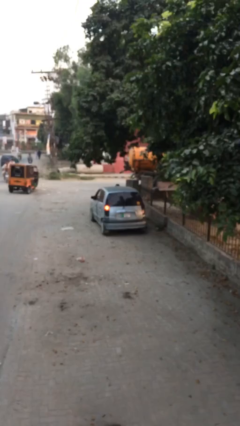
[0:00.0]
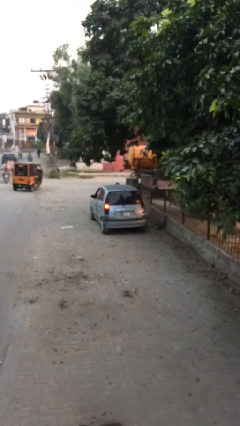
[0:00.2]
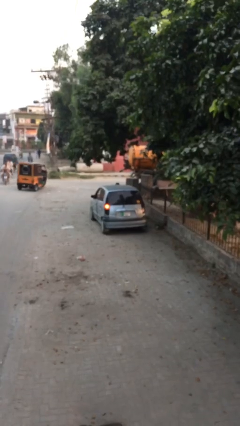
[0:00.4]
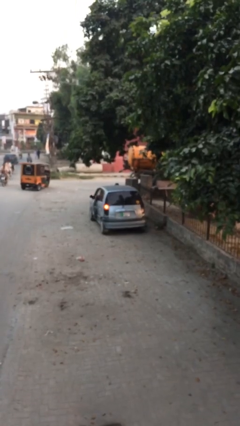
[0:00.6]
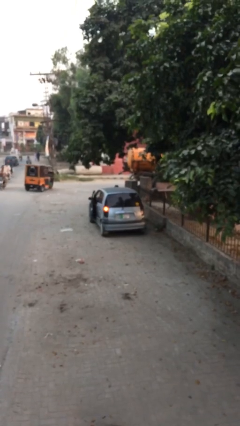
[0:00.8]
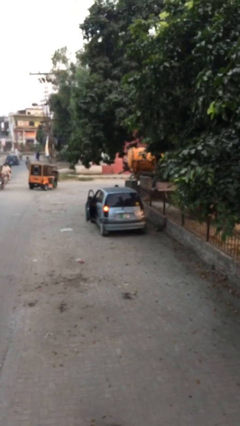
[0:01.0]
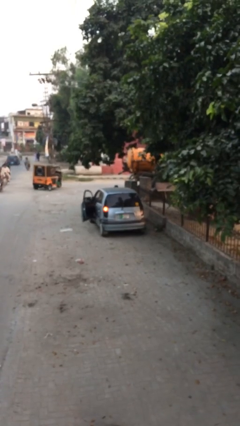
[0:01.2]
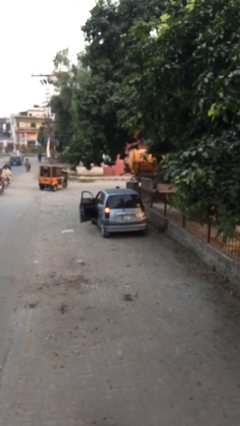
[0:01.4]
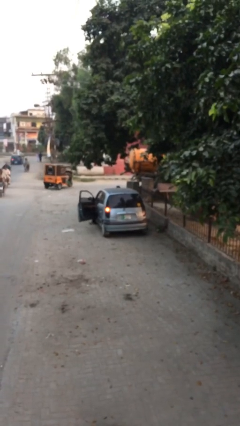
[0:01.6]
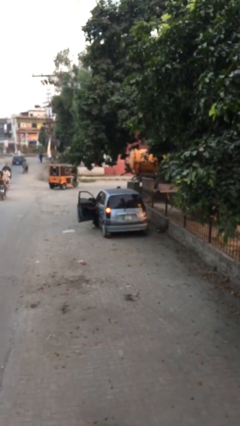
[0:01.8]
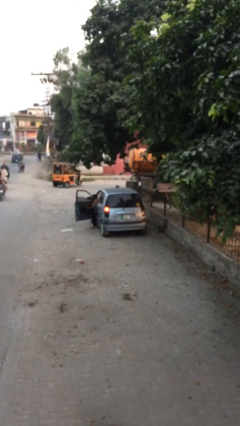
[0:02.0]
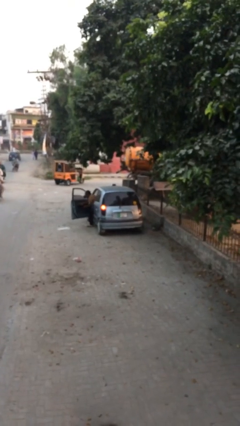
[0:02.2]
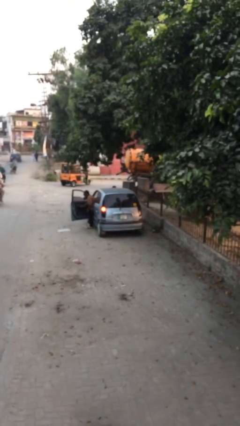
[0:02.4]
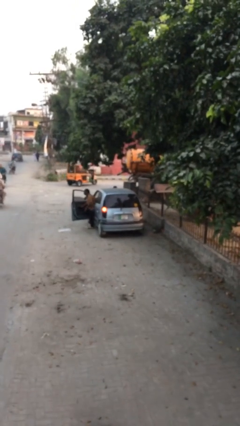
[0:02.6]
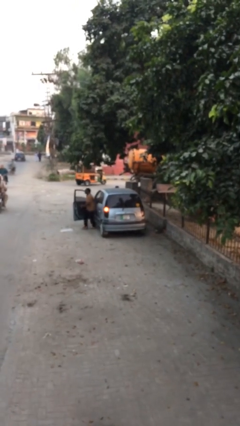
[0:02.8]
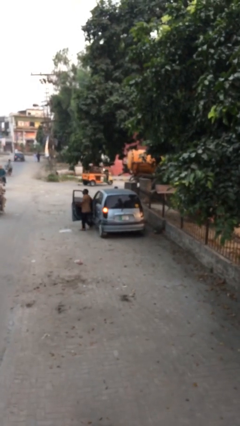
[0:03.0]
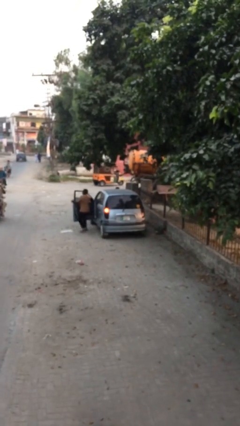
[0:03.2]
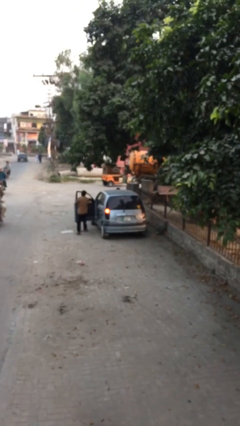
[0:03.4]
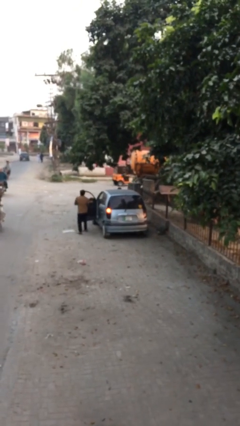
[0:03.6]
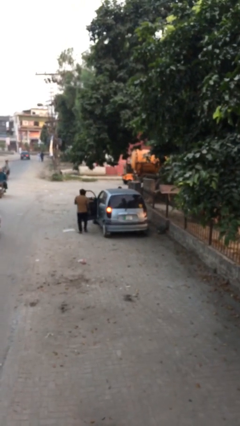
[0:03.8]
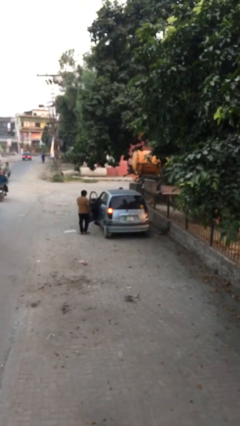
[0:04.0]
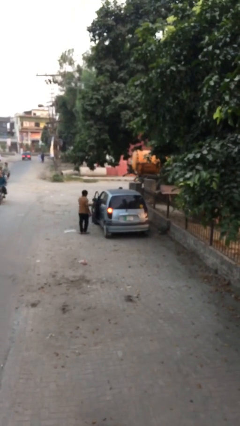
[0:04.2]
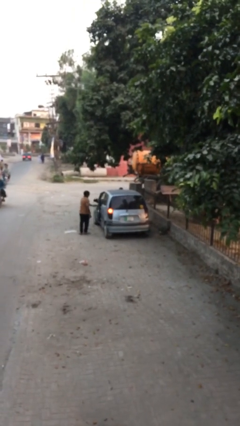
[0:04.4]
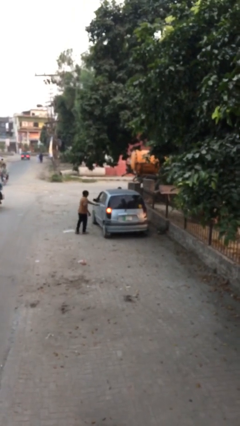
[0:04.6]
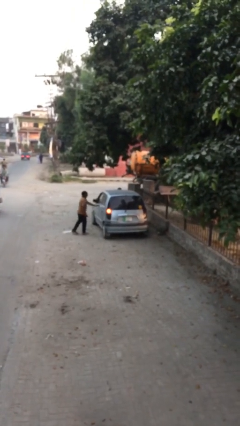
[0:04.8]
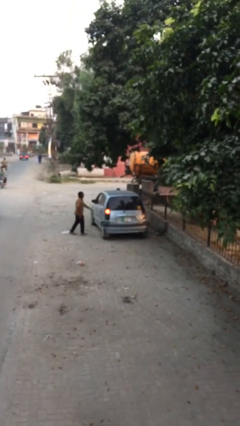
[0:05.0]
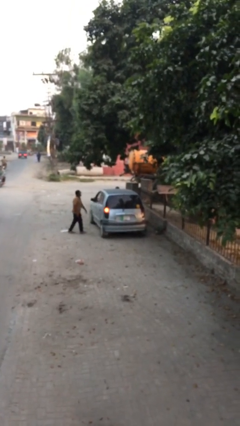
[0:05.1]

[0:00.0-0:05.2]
car drops off person

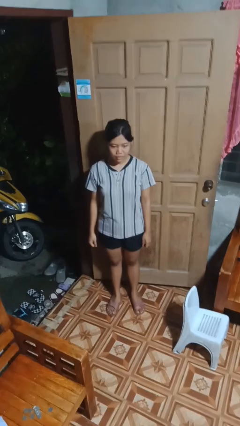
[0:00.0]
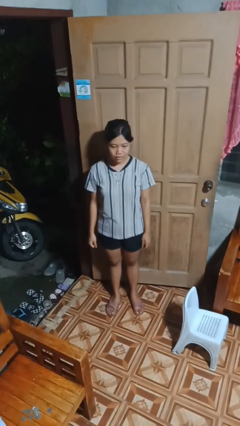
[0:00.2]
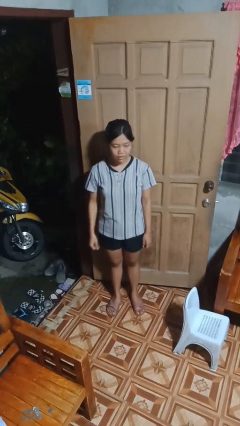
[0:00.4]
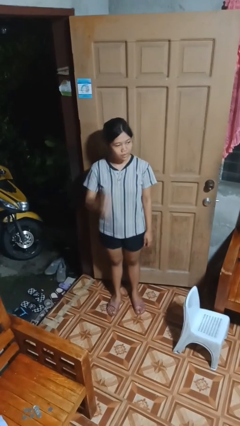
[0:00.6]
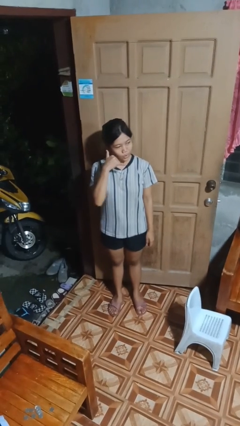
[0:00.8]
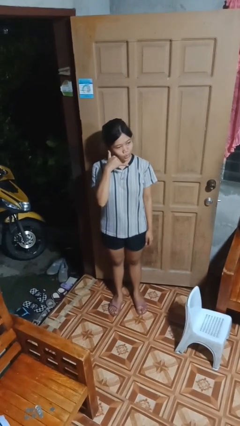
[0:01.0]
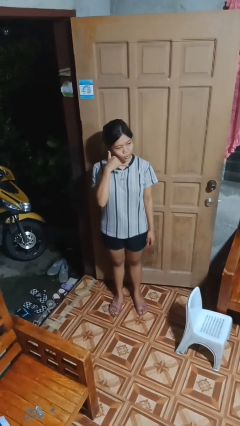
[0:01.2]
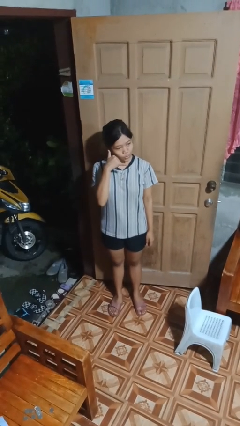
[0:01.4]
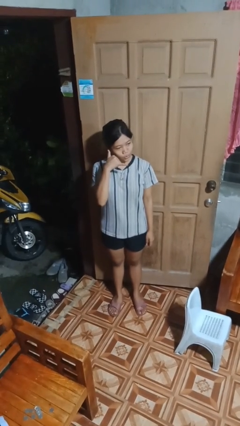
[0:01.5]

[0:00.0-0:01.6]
person gestures call me

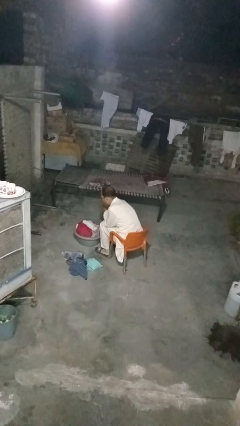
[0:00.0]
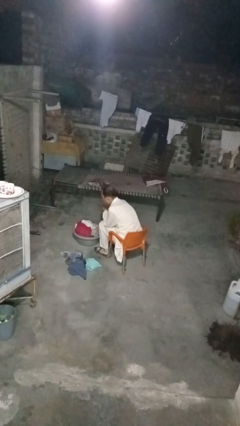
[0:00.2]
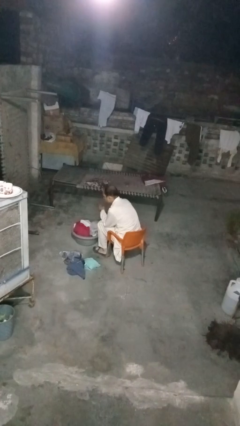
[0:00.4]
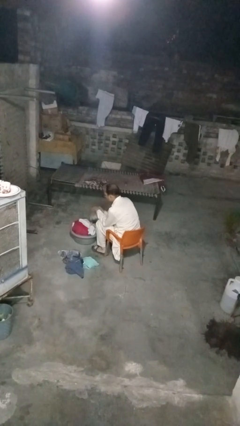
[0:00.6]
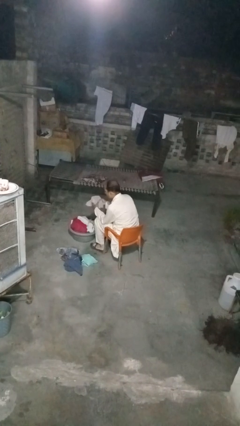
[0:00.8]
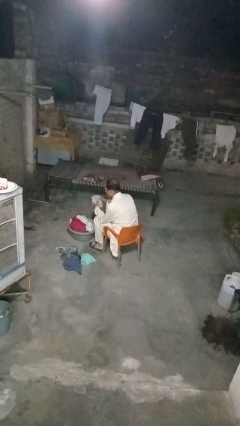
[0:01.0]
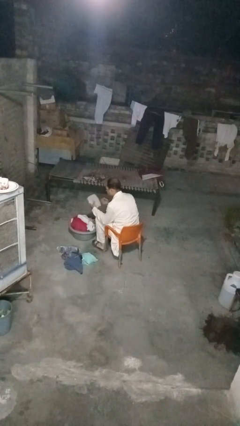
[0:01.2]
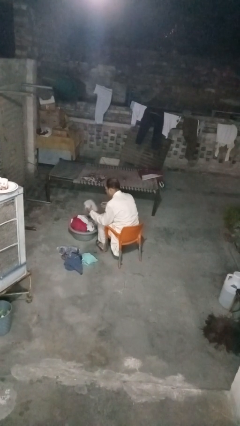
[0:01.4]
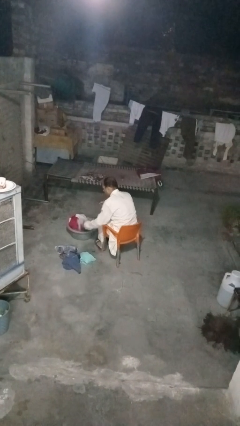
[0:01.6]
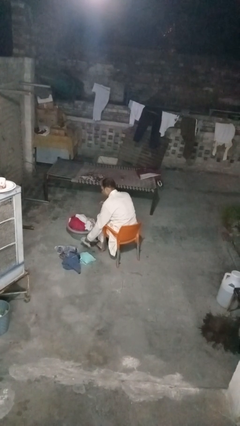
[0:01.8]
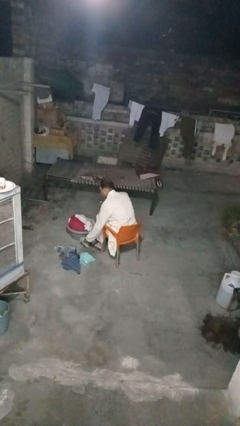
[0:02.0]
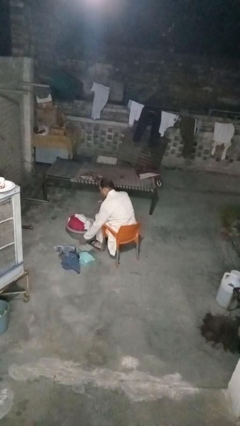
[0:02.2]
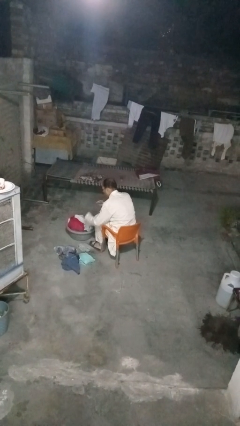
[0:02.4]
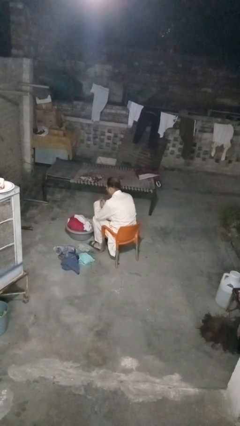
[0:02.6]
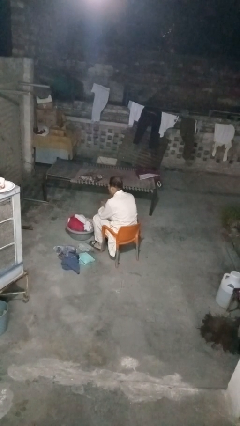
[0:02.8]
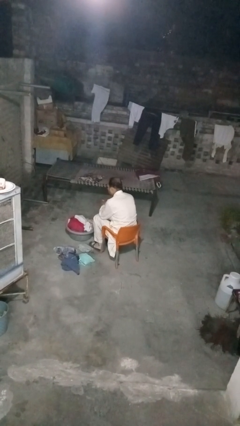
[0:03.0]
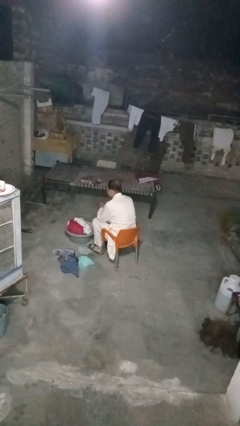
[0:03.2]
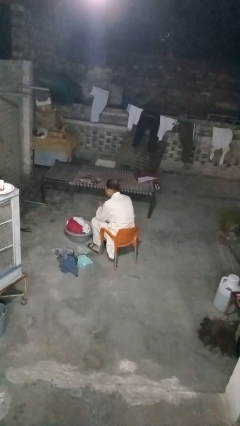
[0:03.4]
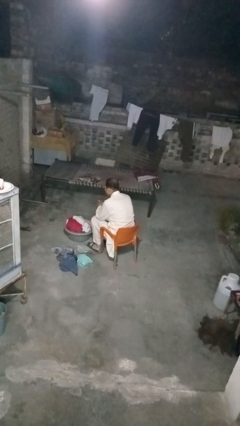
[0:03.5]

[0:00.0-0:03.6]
person takes object from basket

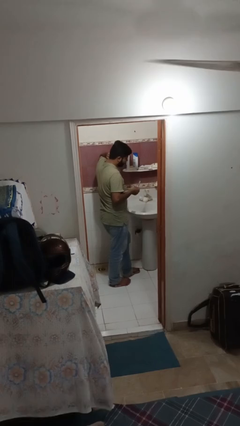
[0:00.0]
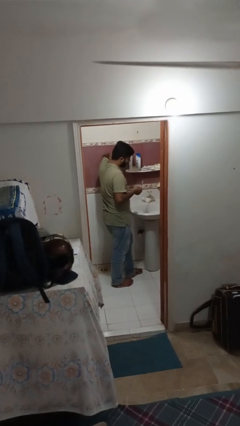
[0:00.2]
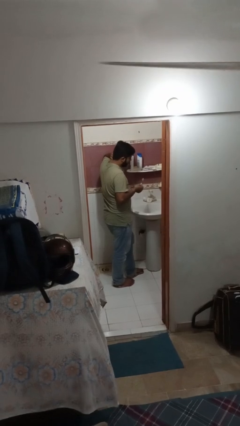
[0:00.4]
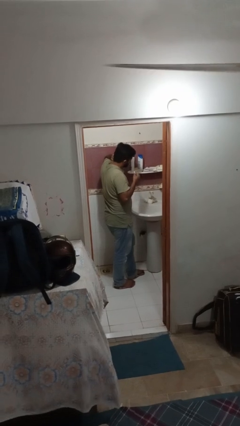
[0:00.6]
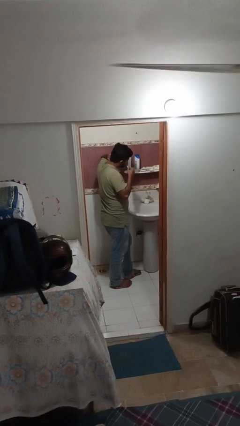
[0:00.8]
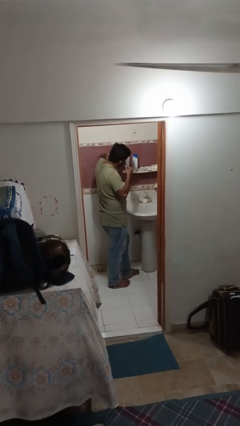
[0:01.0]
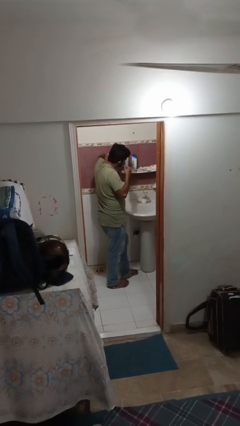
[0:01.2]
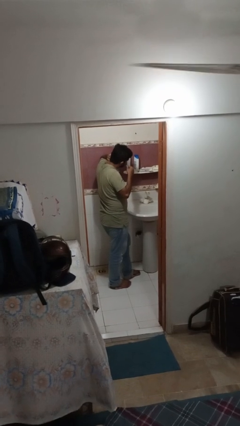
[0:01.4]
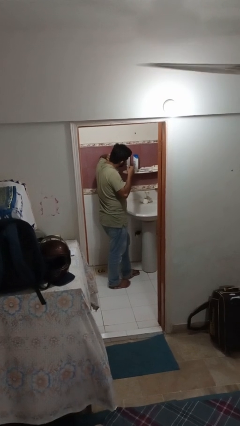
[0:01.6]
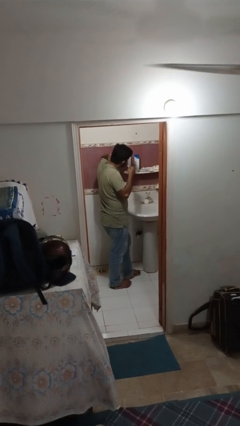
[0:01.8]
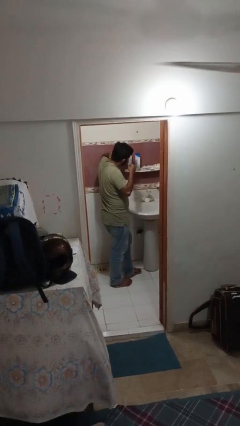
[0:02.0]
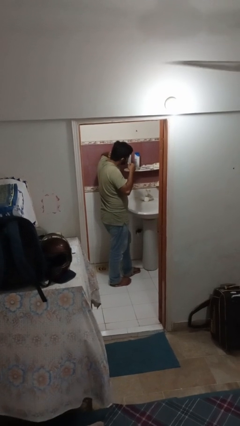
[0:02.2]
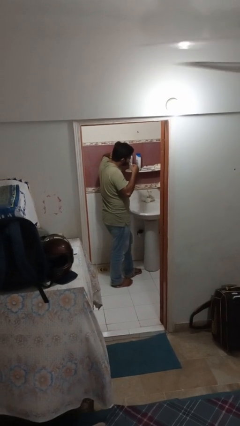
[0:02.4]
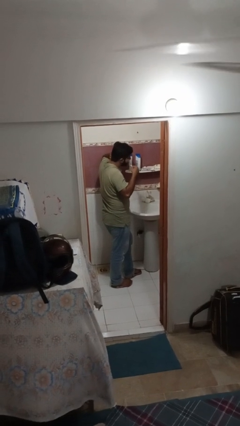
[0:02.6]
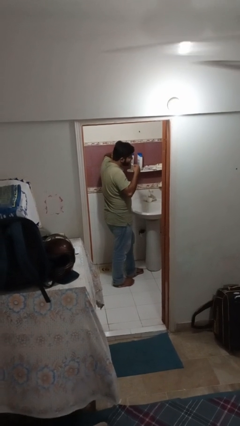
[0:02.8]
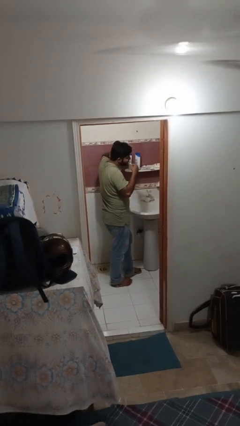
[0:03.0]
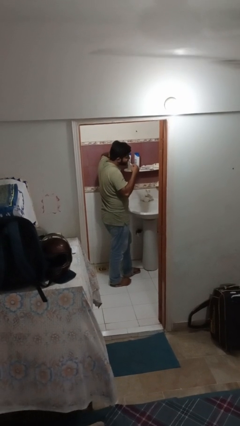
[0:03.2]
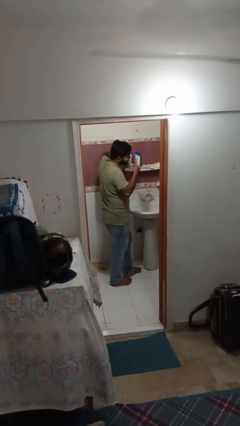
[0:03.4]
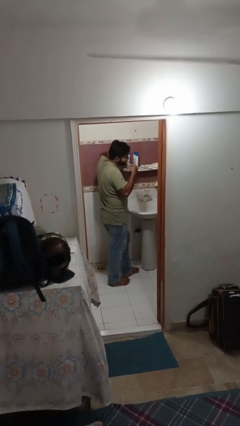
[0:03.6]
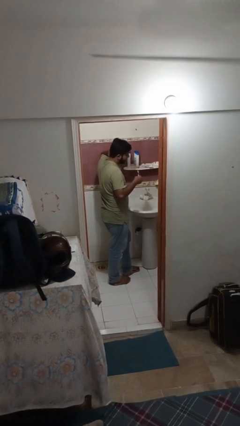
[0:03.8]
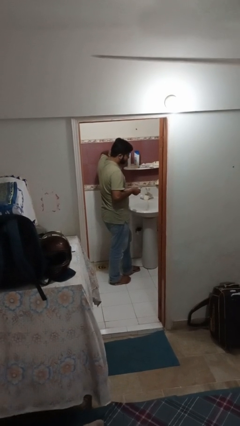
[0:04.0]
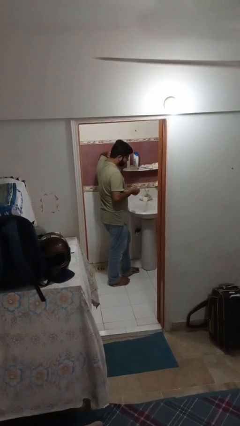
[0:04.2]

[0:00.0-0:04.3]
person brushes teeth

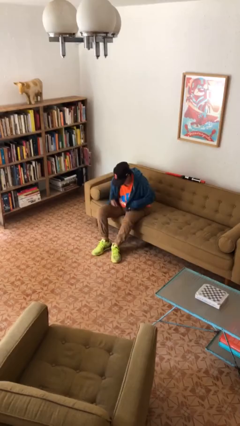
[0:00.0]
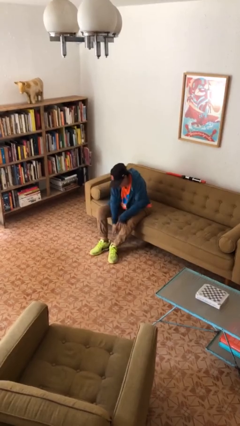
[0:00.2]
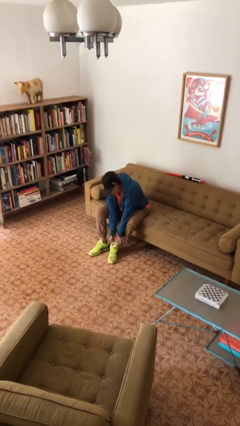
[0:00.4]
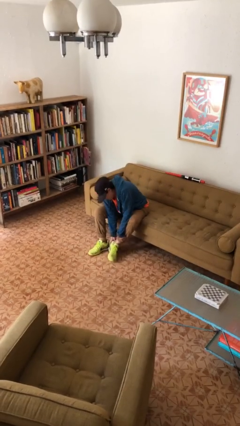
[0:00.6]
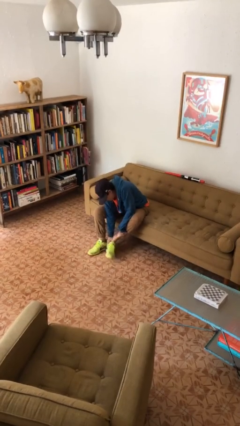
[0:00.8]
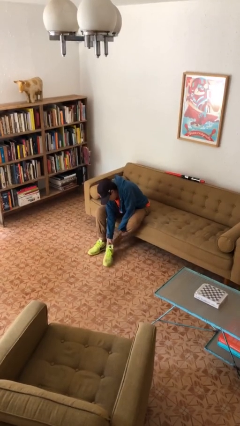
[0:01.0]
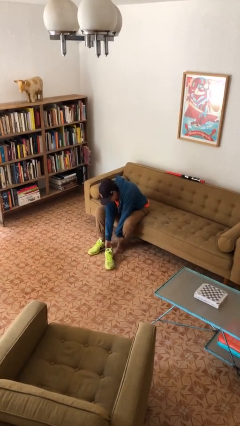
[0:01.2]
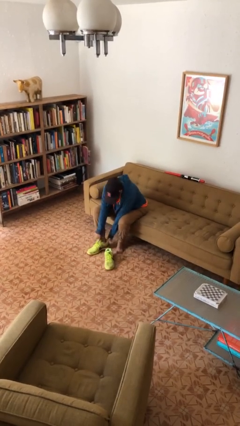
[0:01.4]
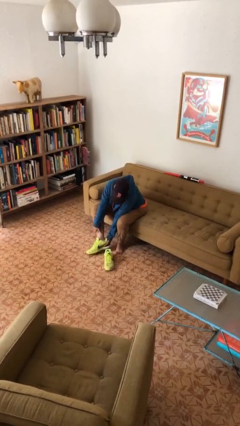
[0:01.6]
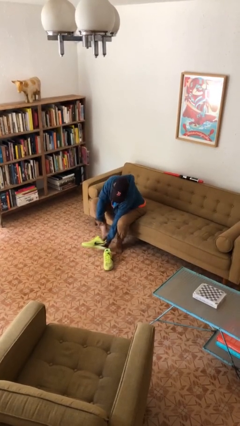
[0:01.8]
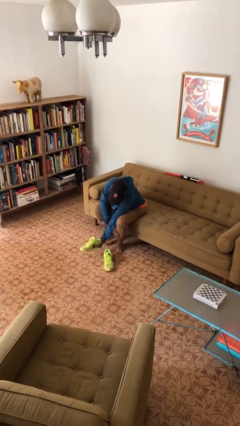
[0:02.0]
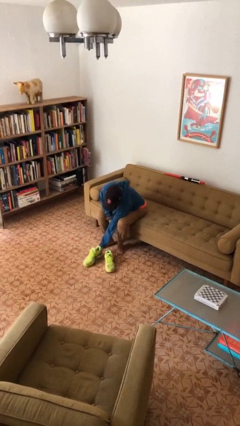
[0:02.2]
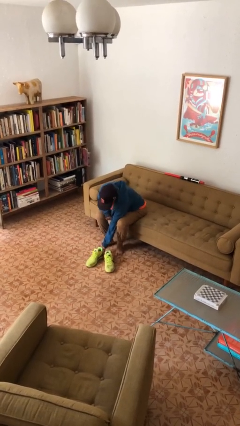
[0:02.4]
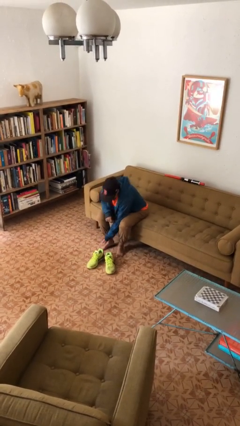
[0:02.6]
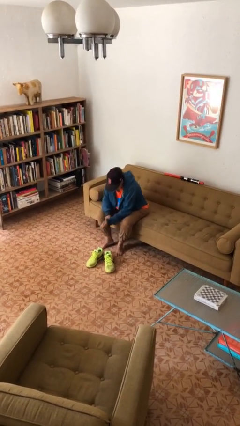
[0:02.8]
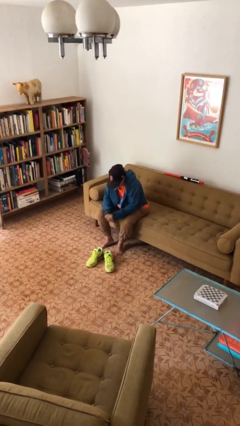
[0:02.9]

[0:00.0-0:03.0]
person takes off shoes

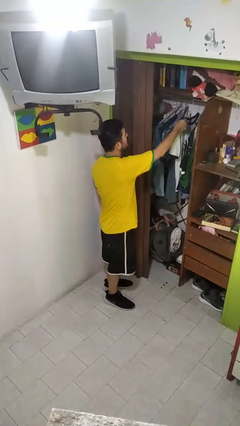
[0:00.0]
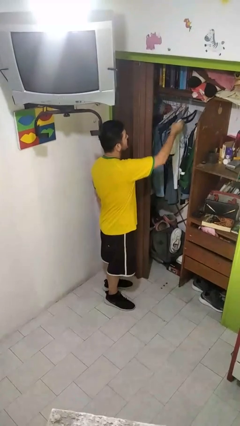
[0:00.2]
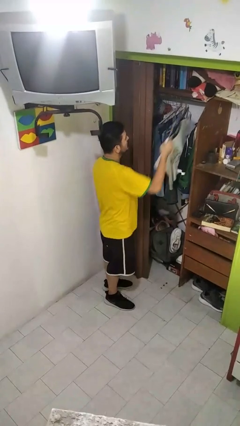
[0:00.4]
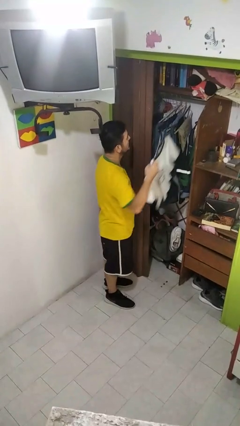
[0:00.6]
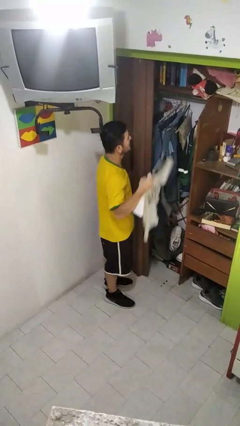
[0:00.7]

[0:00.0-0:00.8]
person takes clothes from closet
